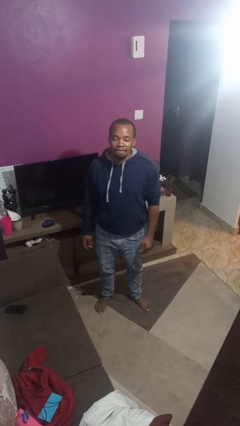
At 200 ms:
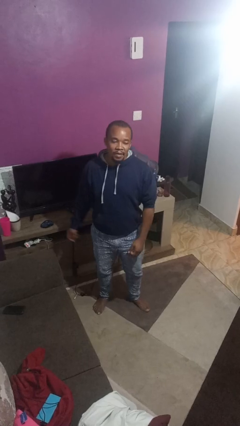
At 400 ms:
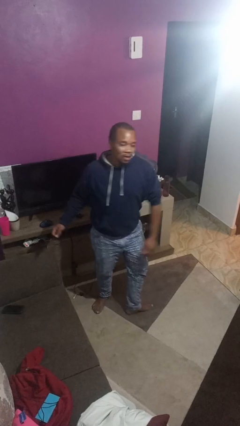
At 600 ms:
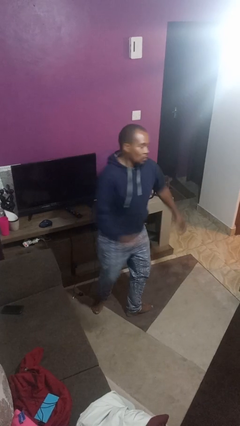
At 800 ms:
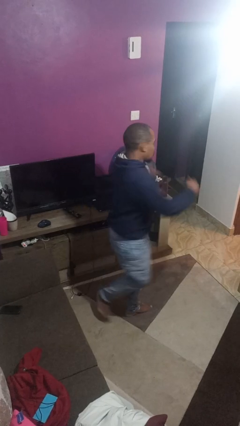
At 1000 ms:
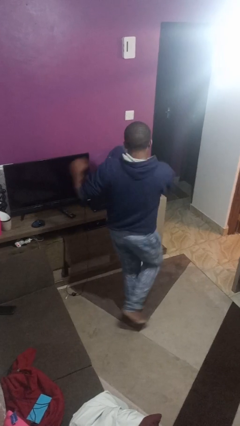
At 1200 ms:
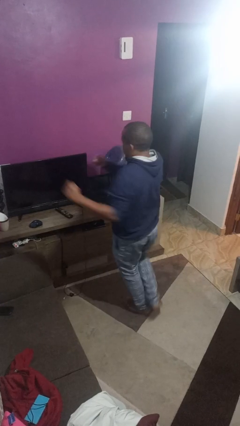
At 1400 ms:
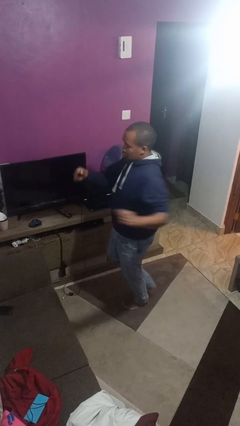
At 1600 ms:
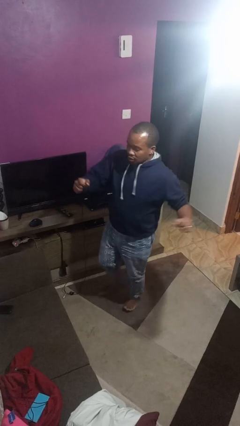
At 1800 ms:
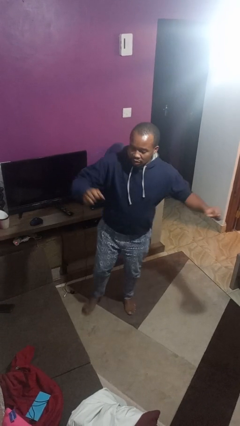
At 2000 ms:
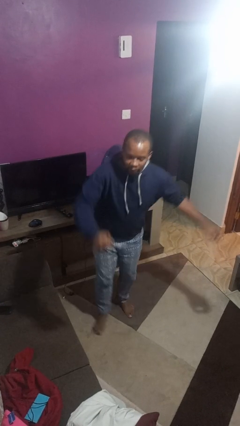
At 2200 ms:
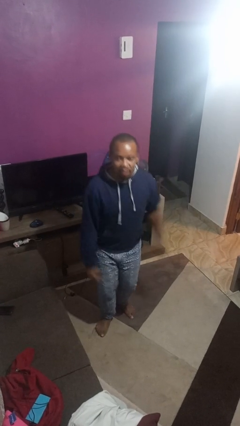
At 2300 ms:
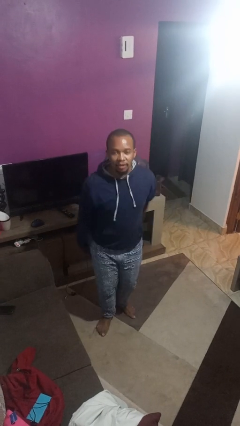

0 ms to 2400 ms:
person twirls

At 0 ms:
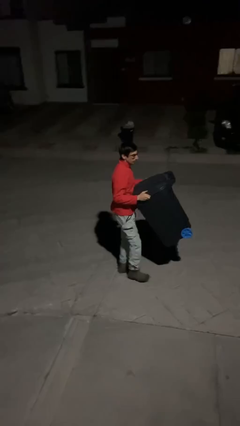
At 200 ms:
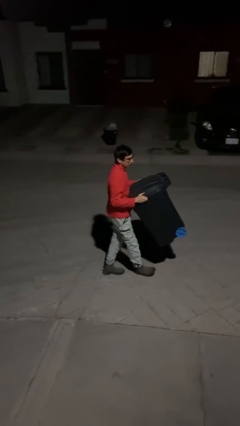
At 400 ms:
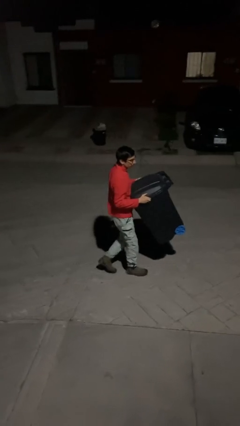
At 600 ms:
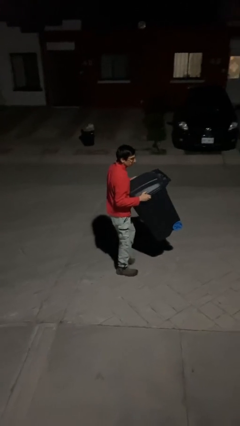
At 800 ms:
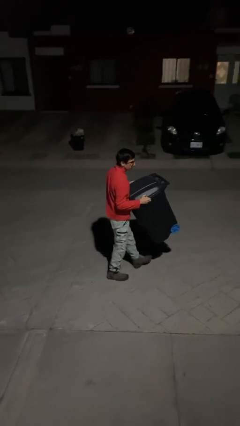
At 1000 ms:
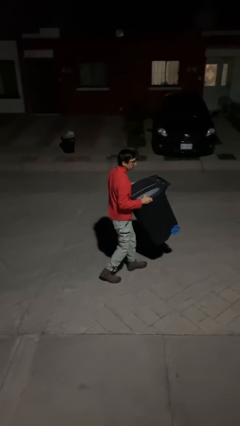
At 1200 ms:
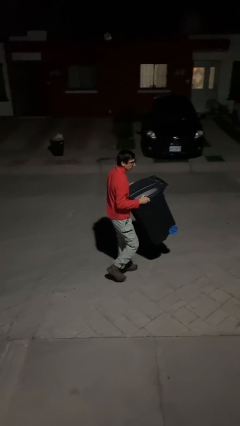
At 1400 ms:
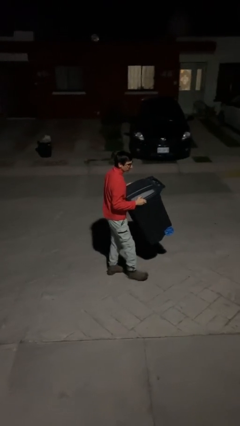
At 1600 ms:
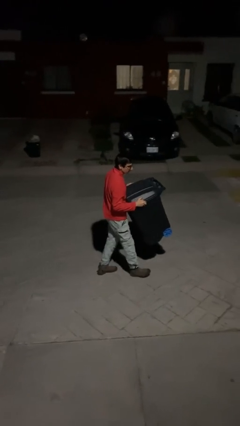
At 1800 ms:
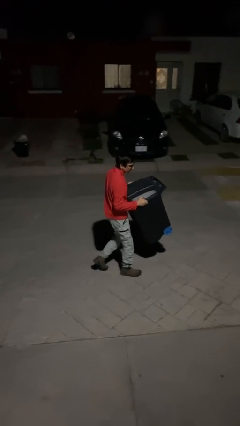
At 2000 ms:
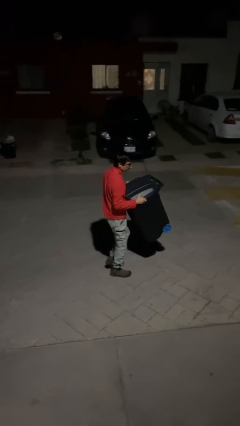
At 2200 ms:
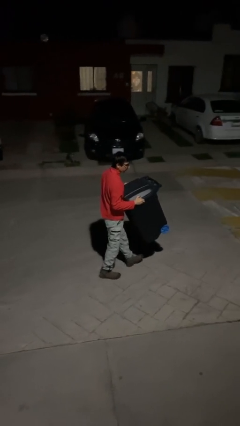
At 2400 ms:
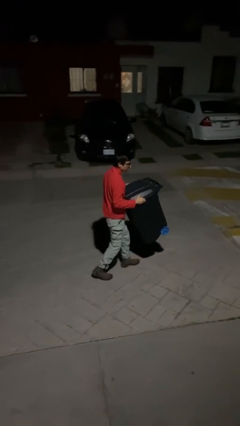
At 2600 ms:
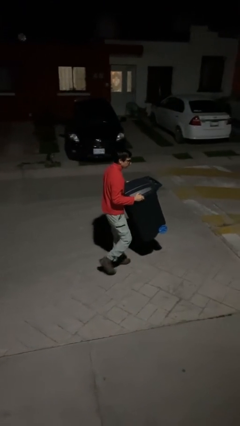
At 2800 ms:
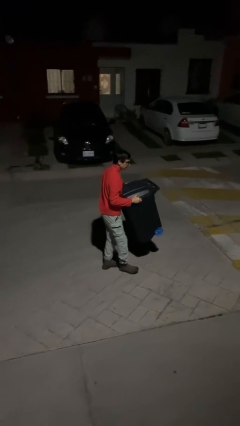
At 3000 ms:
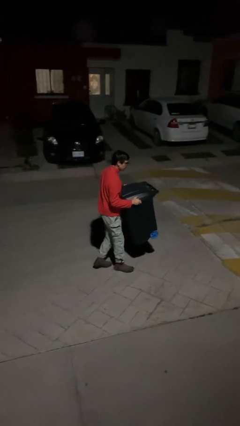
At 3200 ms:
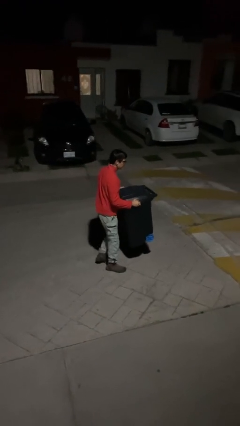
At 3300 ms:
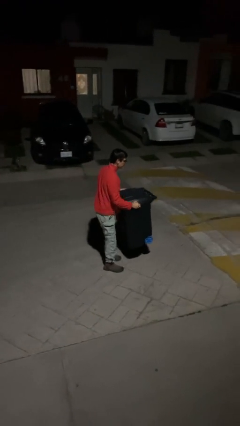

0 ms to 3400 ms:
person carries heavy object

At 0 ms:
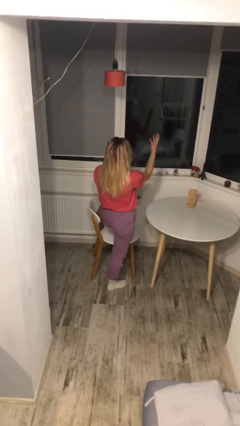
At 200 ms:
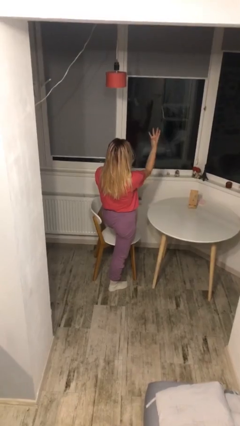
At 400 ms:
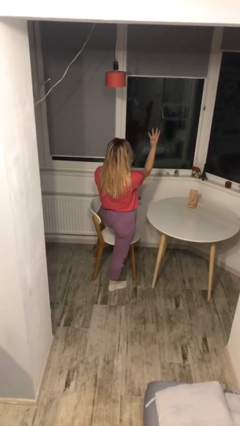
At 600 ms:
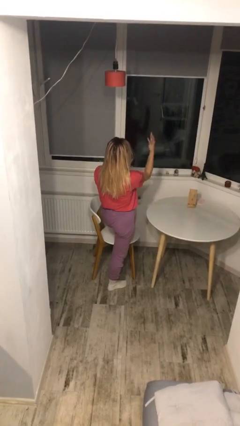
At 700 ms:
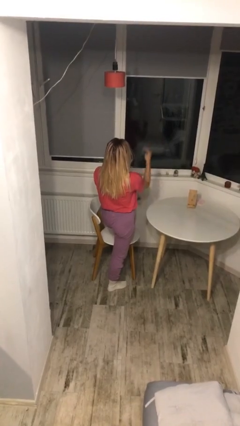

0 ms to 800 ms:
person gestures number four

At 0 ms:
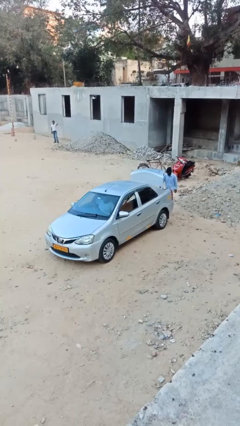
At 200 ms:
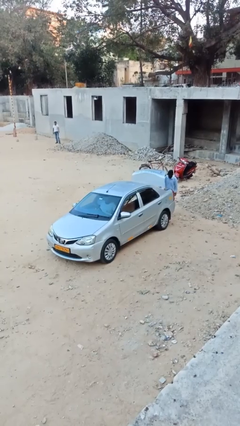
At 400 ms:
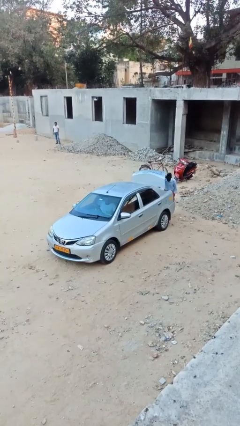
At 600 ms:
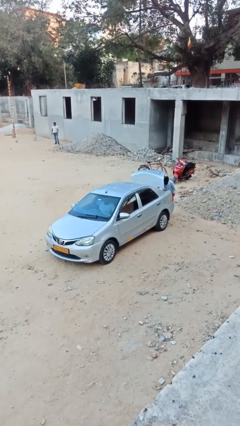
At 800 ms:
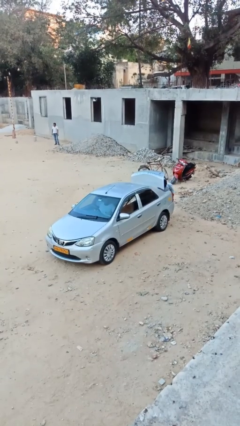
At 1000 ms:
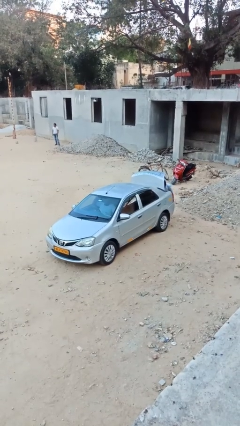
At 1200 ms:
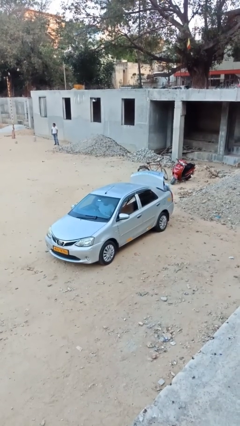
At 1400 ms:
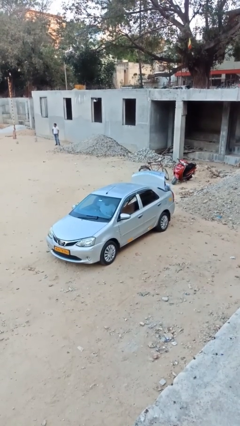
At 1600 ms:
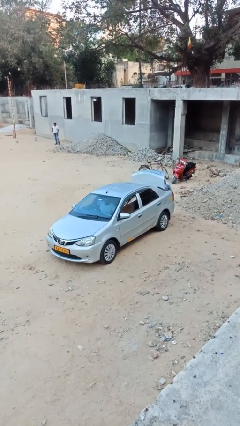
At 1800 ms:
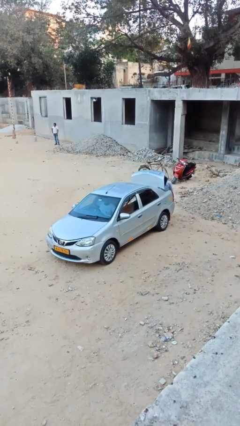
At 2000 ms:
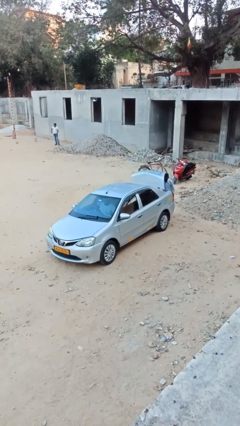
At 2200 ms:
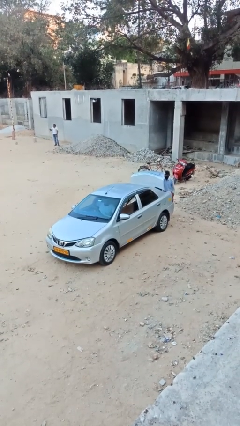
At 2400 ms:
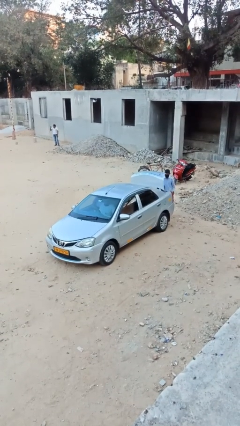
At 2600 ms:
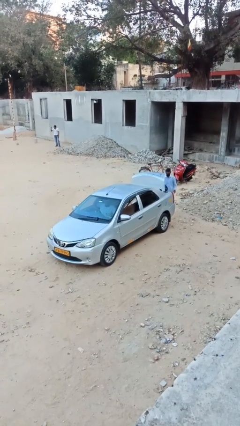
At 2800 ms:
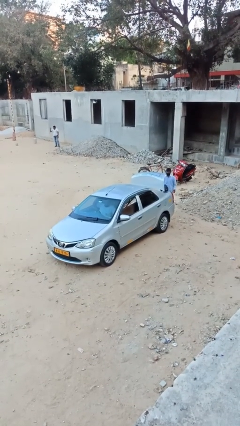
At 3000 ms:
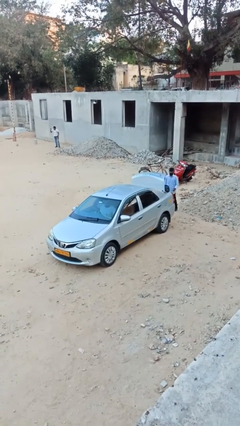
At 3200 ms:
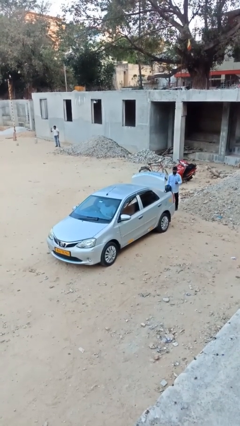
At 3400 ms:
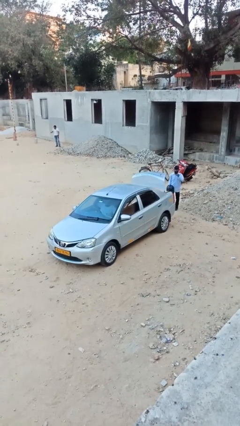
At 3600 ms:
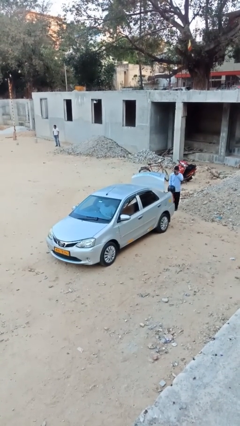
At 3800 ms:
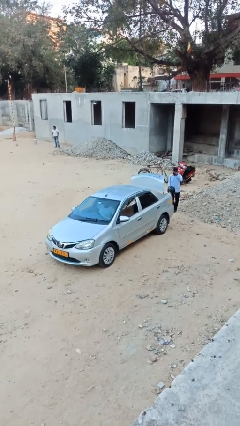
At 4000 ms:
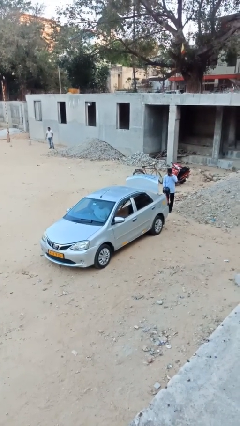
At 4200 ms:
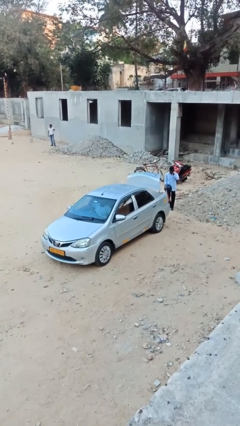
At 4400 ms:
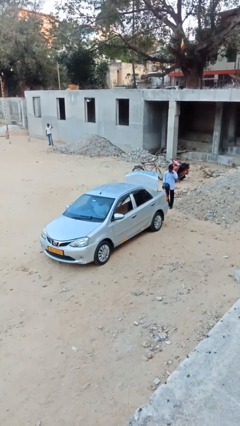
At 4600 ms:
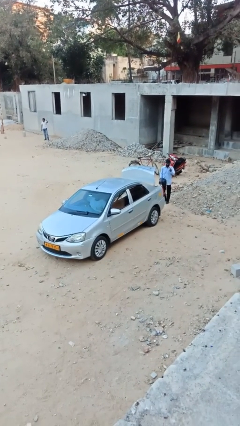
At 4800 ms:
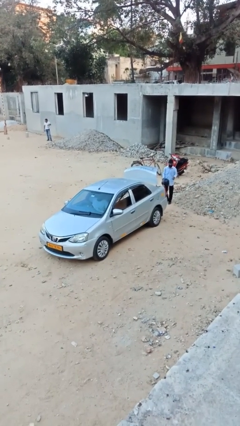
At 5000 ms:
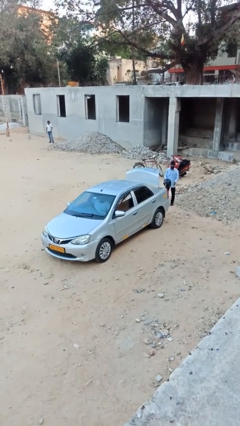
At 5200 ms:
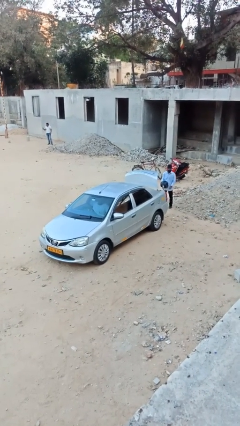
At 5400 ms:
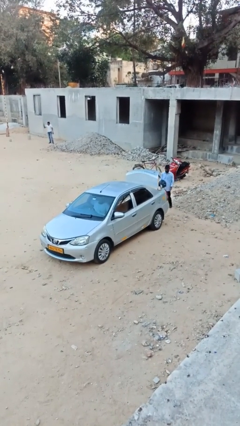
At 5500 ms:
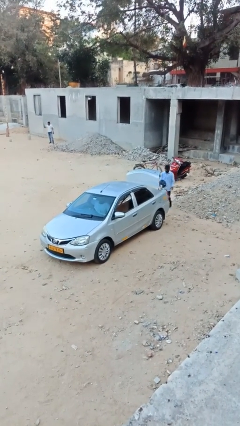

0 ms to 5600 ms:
person unloads car

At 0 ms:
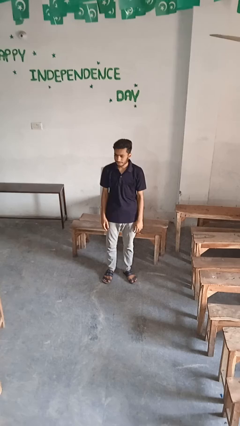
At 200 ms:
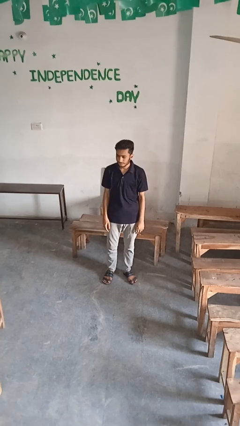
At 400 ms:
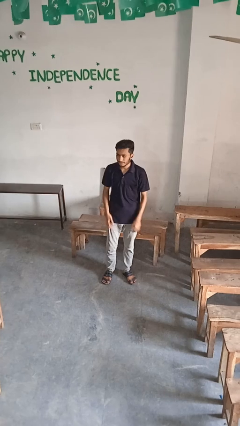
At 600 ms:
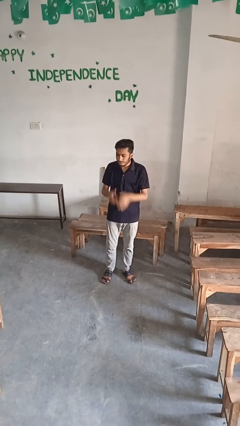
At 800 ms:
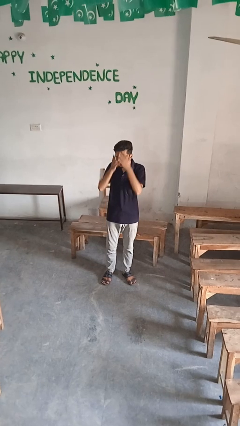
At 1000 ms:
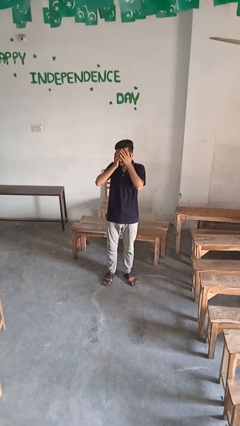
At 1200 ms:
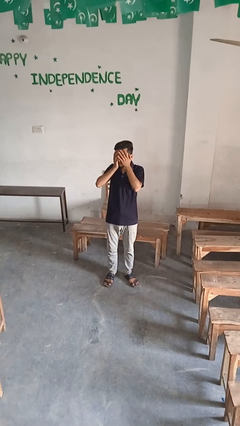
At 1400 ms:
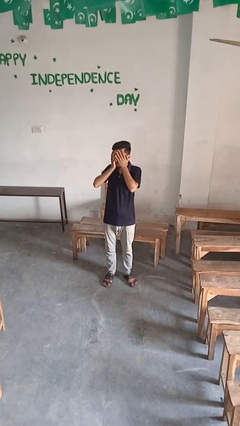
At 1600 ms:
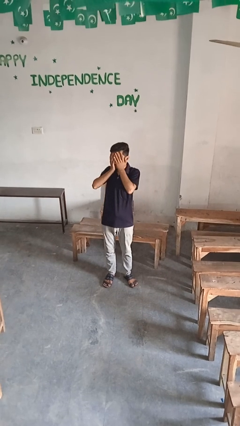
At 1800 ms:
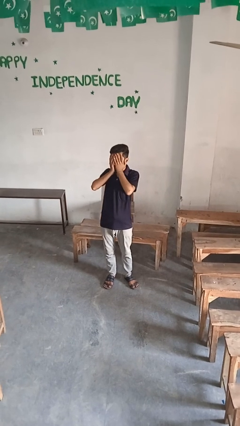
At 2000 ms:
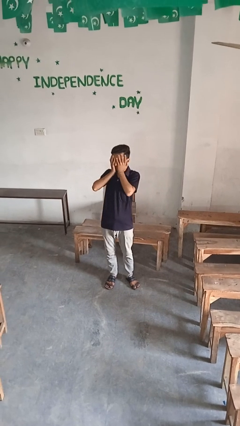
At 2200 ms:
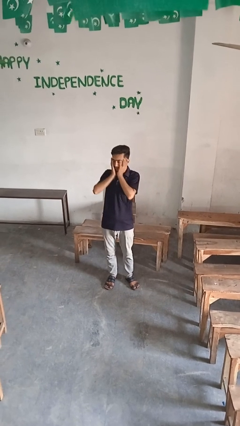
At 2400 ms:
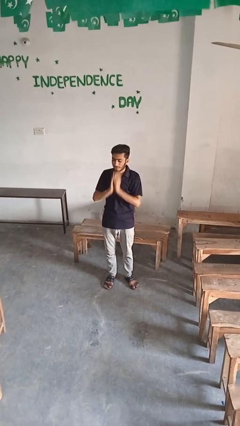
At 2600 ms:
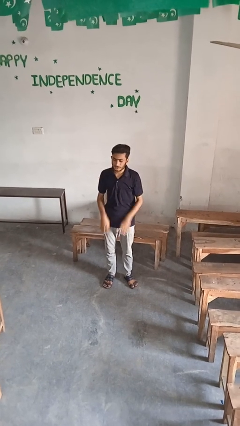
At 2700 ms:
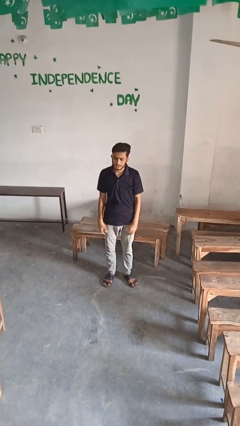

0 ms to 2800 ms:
person covers face with hands

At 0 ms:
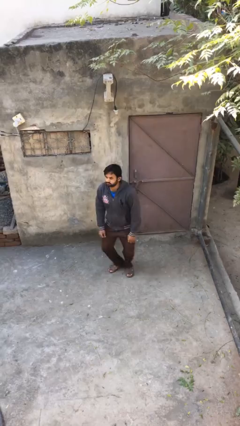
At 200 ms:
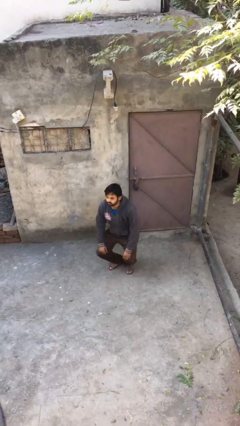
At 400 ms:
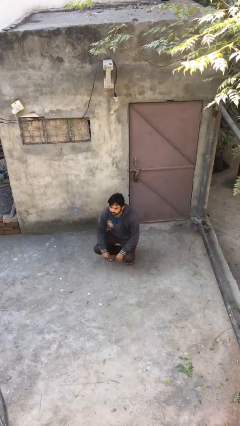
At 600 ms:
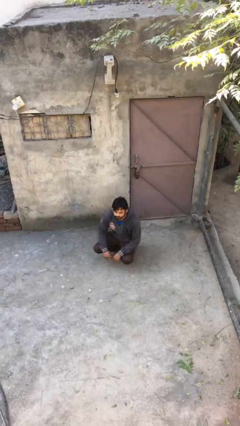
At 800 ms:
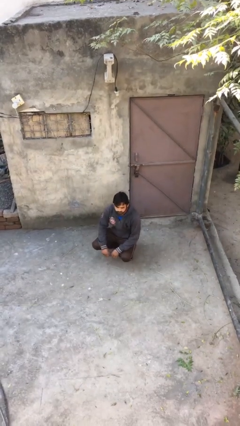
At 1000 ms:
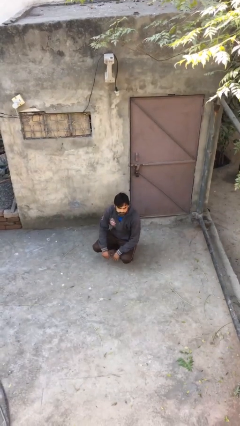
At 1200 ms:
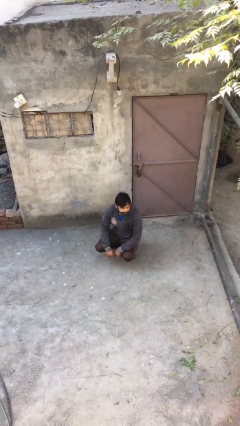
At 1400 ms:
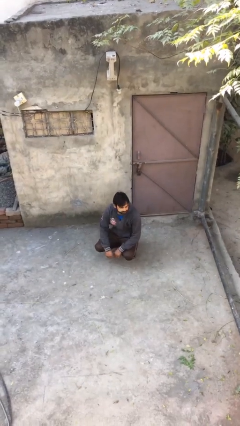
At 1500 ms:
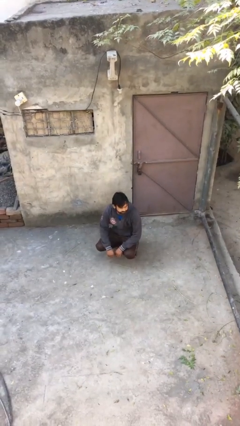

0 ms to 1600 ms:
person sits down

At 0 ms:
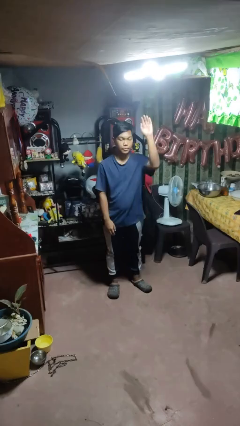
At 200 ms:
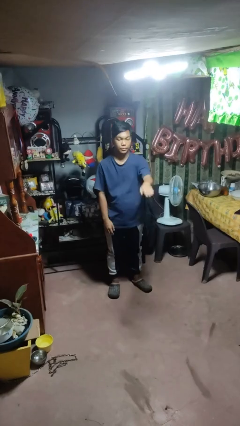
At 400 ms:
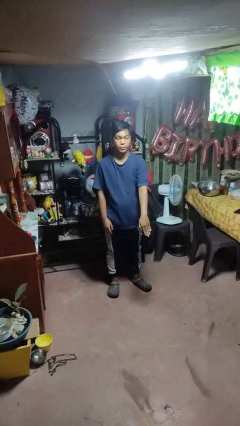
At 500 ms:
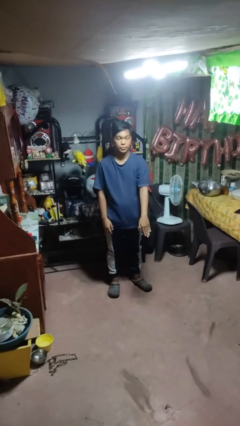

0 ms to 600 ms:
person gestures swipe down

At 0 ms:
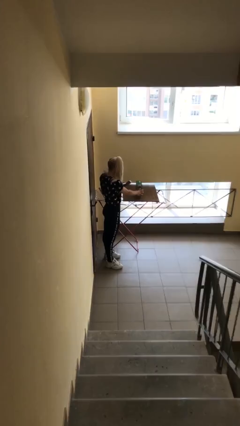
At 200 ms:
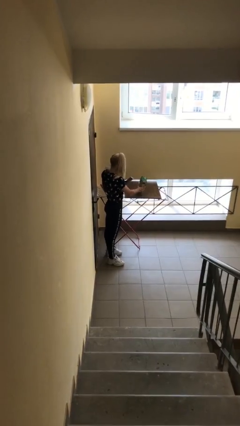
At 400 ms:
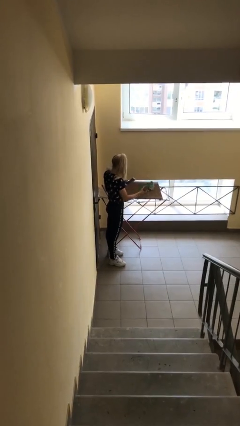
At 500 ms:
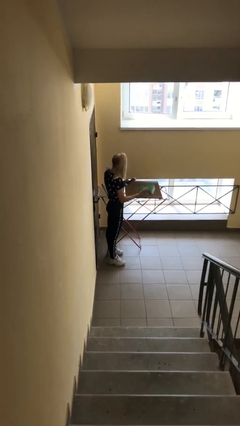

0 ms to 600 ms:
person picks up object from table
